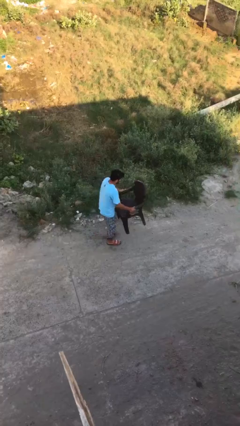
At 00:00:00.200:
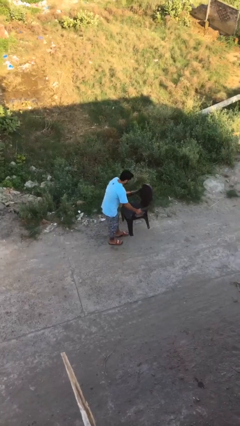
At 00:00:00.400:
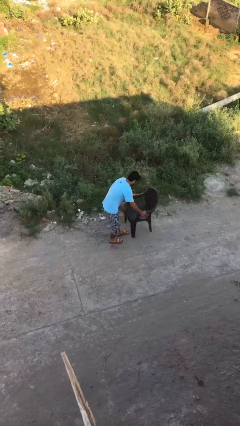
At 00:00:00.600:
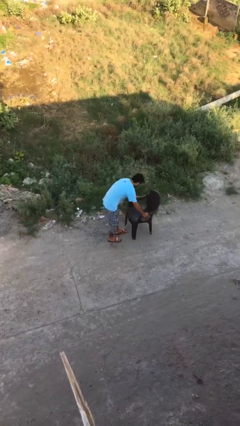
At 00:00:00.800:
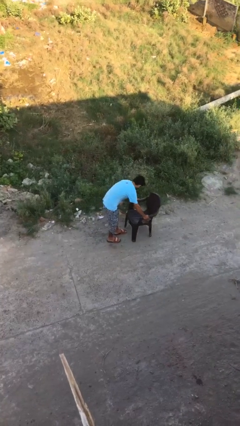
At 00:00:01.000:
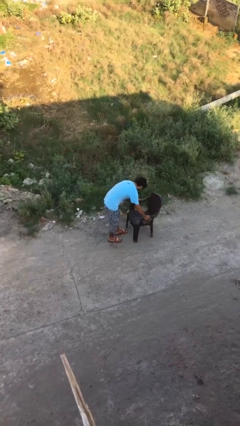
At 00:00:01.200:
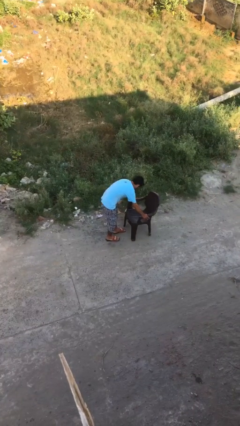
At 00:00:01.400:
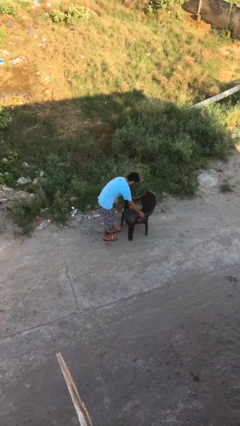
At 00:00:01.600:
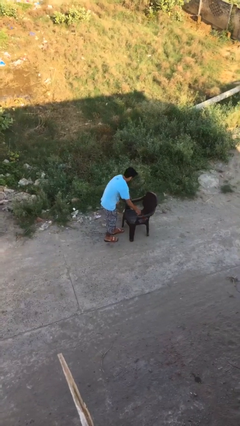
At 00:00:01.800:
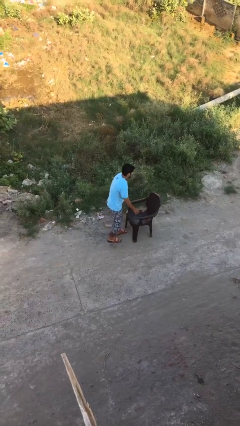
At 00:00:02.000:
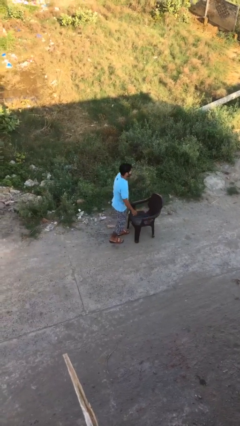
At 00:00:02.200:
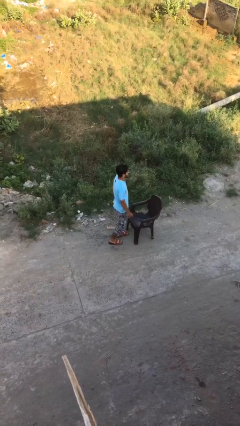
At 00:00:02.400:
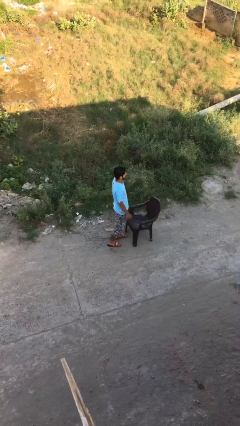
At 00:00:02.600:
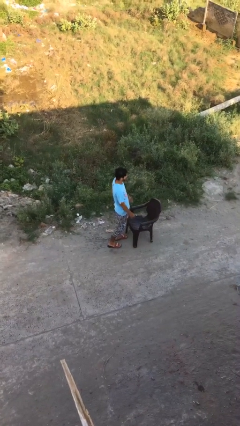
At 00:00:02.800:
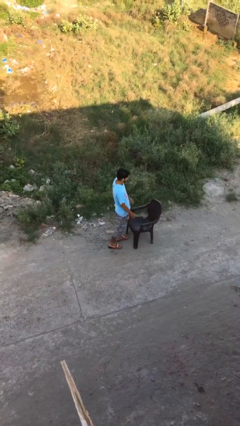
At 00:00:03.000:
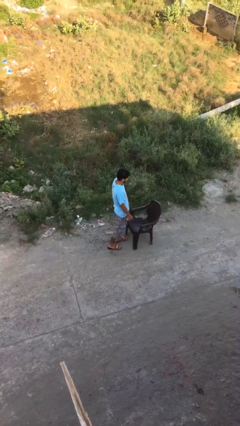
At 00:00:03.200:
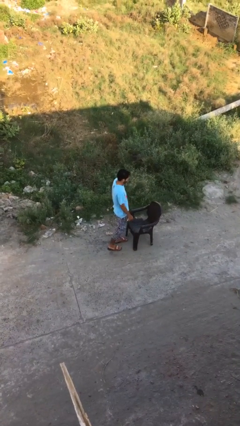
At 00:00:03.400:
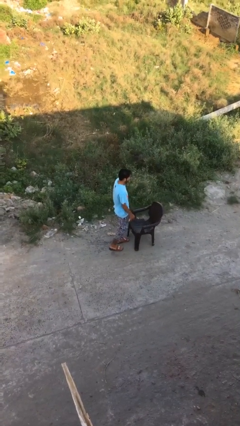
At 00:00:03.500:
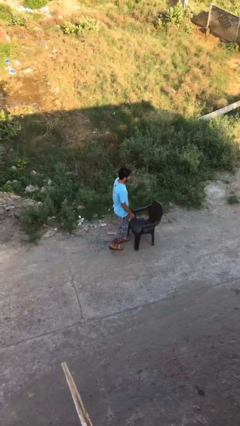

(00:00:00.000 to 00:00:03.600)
person puts down object on floor

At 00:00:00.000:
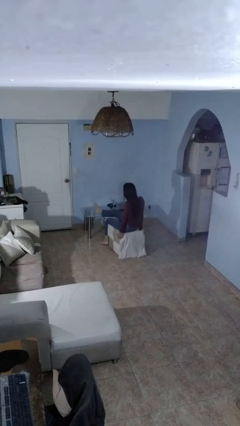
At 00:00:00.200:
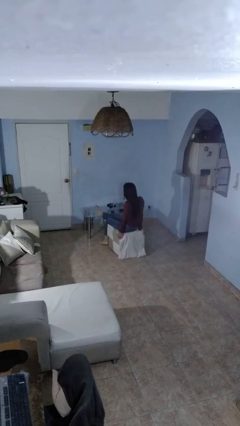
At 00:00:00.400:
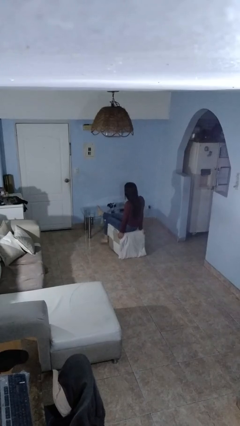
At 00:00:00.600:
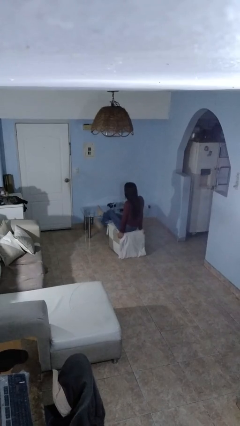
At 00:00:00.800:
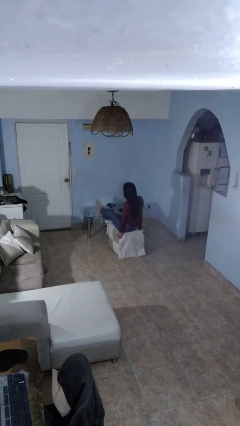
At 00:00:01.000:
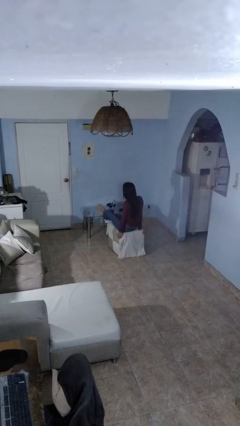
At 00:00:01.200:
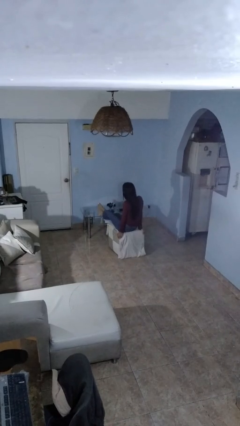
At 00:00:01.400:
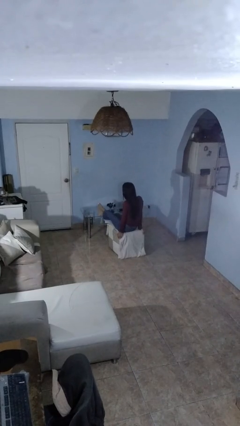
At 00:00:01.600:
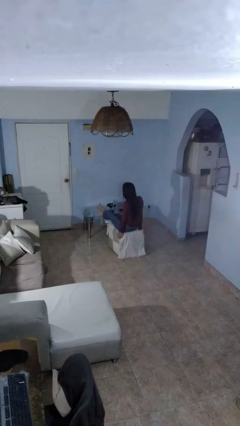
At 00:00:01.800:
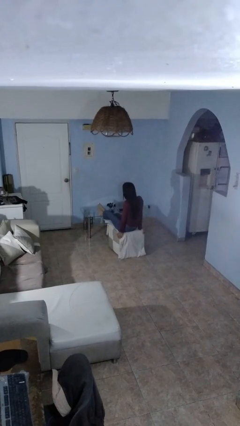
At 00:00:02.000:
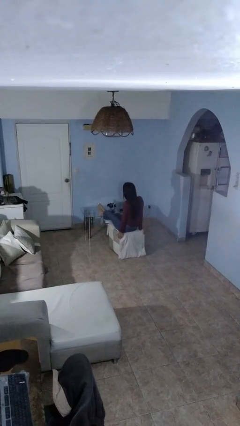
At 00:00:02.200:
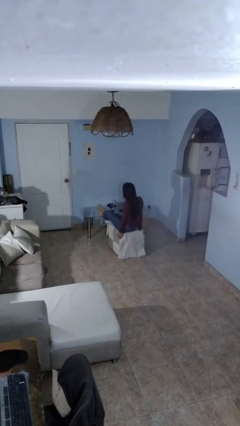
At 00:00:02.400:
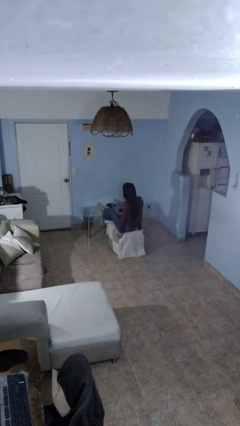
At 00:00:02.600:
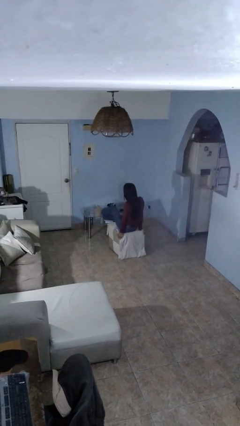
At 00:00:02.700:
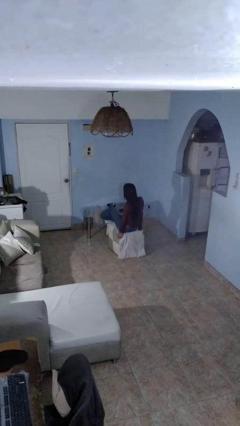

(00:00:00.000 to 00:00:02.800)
person puts feet up

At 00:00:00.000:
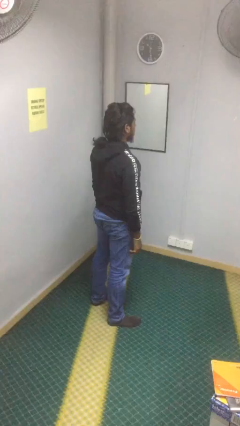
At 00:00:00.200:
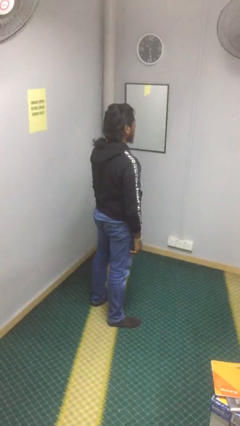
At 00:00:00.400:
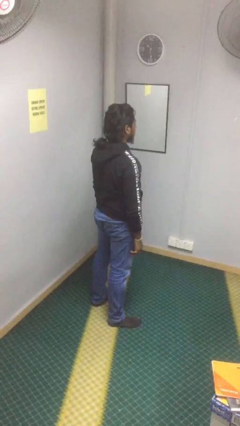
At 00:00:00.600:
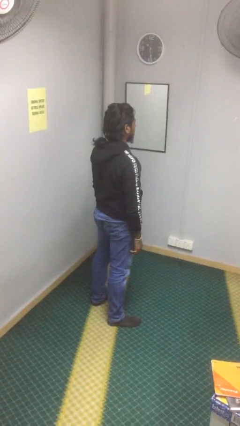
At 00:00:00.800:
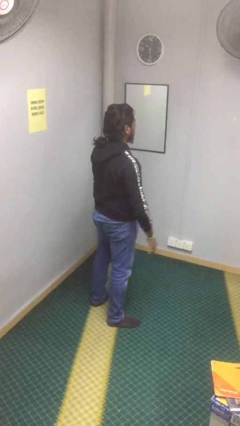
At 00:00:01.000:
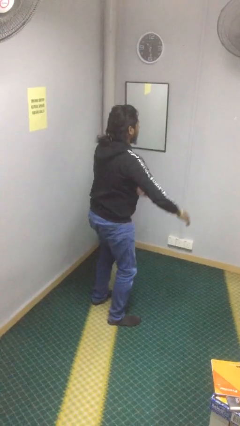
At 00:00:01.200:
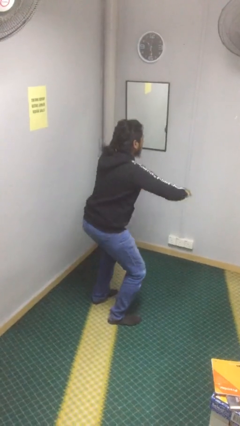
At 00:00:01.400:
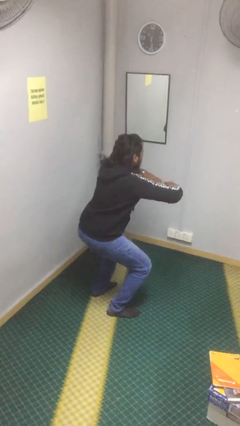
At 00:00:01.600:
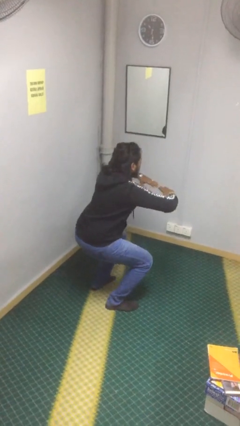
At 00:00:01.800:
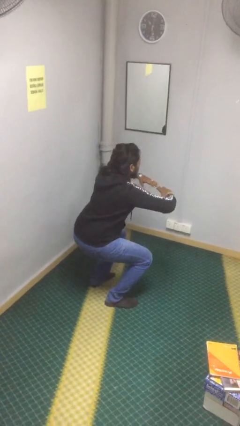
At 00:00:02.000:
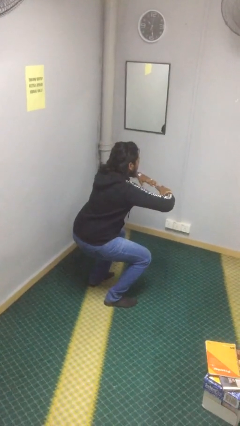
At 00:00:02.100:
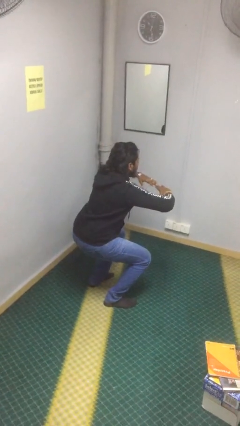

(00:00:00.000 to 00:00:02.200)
person squats

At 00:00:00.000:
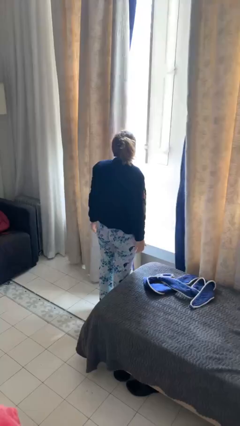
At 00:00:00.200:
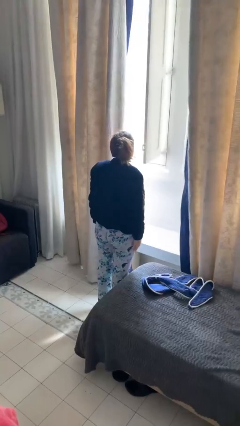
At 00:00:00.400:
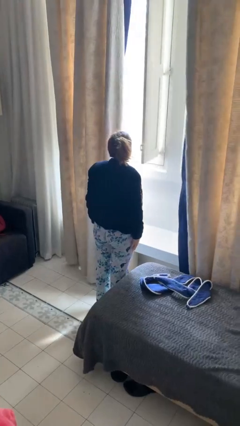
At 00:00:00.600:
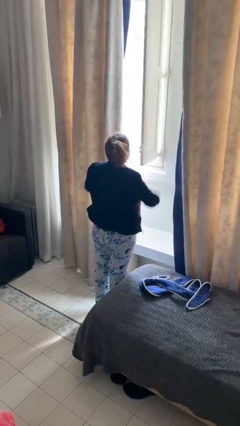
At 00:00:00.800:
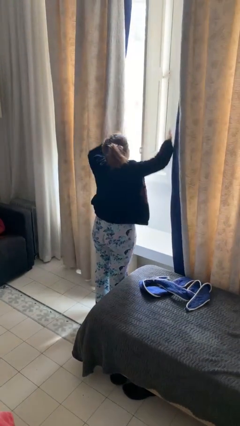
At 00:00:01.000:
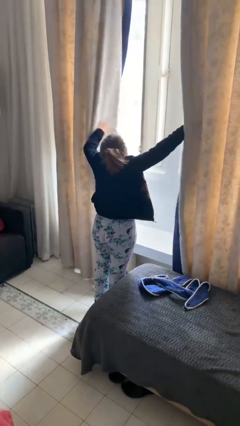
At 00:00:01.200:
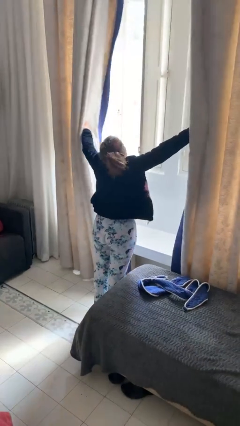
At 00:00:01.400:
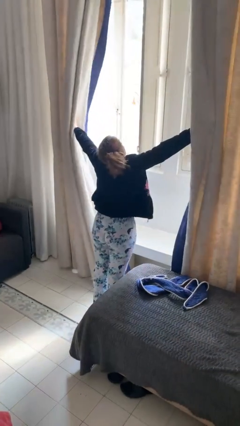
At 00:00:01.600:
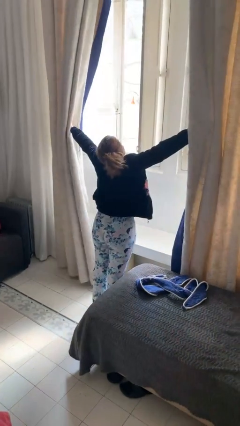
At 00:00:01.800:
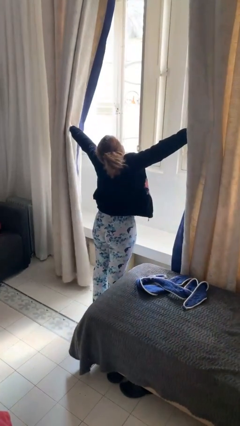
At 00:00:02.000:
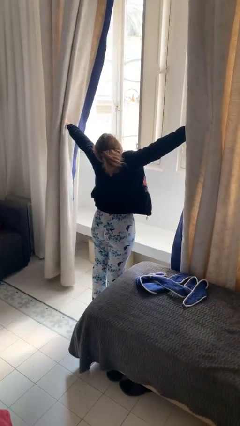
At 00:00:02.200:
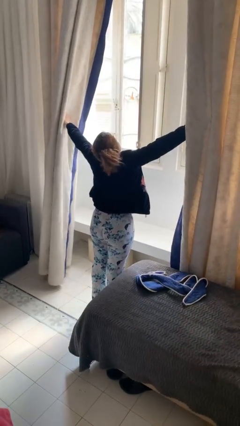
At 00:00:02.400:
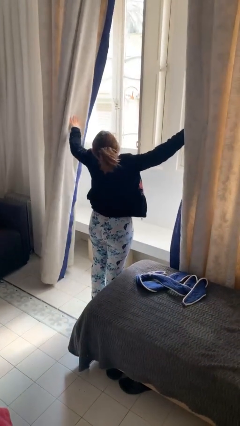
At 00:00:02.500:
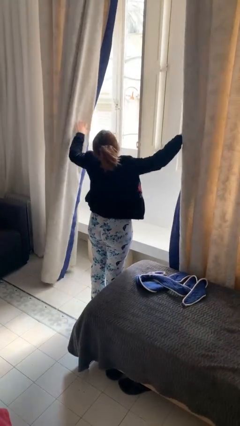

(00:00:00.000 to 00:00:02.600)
person opens curtains

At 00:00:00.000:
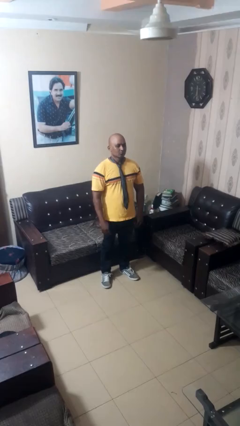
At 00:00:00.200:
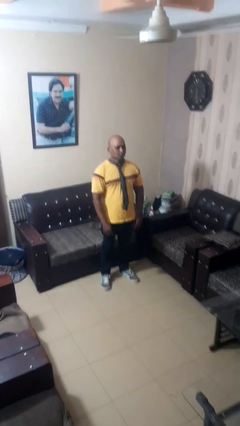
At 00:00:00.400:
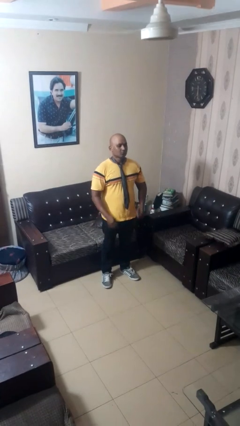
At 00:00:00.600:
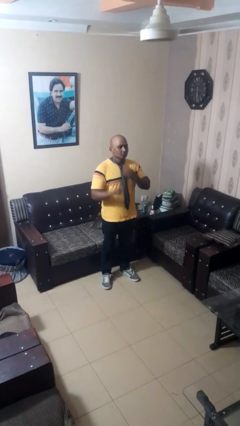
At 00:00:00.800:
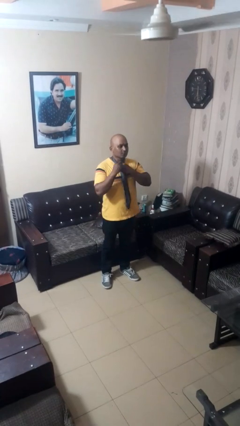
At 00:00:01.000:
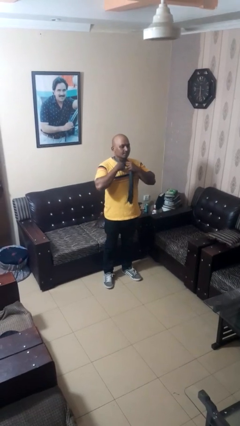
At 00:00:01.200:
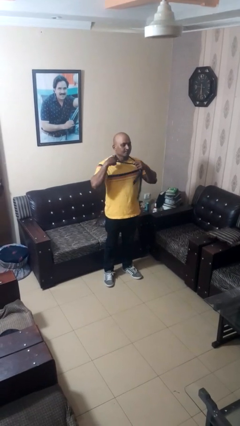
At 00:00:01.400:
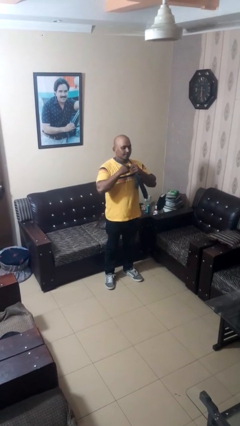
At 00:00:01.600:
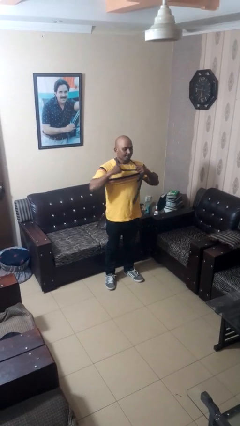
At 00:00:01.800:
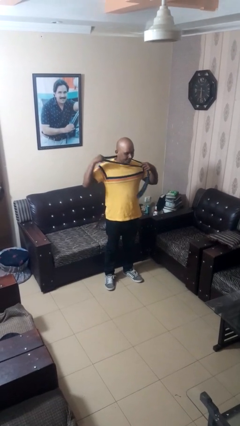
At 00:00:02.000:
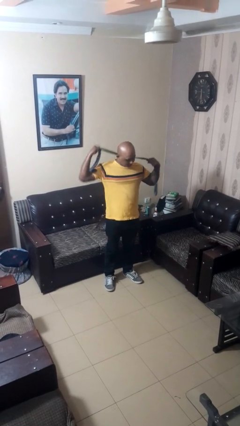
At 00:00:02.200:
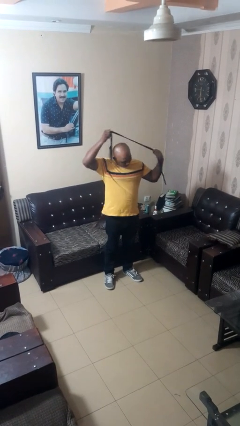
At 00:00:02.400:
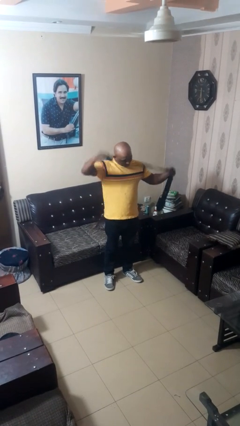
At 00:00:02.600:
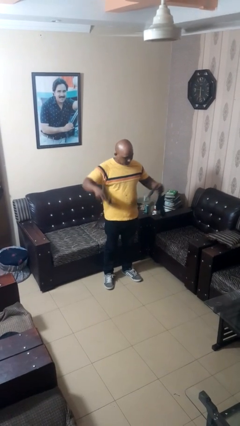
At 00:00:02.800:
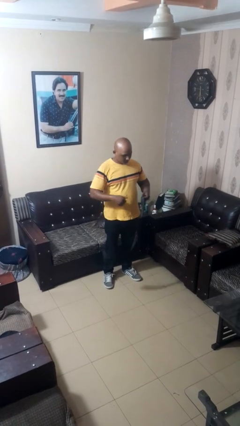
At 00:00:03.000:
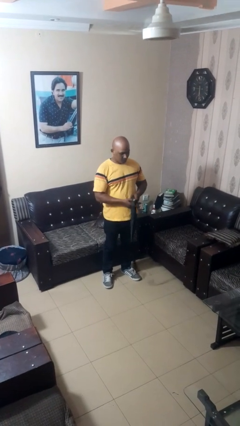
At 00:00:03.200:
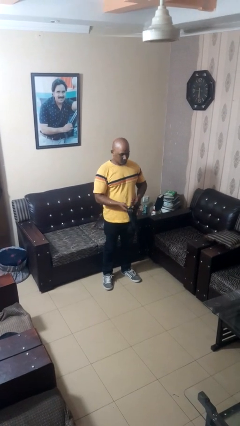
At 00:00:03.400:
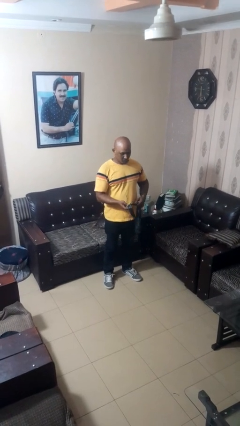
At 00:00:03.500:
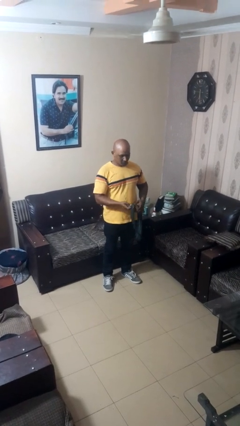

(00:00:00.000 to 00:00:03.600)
person takes off necktie

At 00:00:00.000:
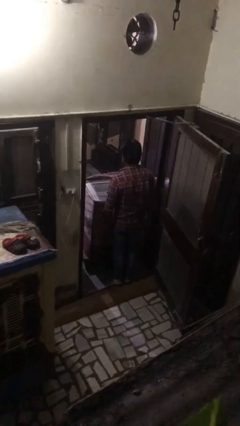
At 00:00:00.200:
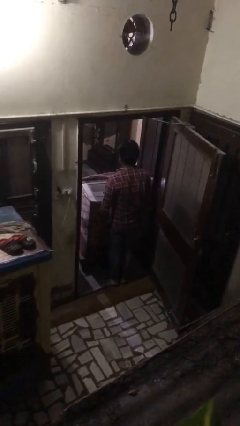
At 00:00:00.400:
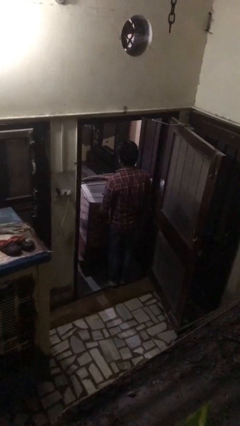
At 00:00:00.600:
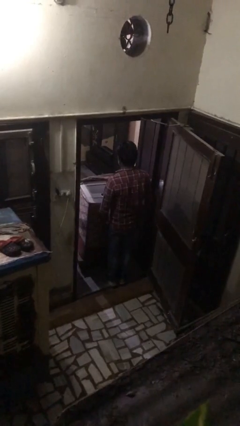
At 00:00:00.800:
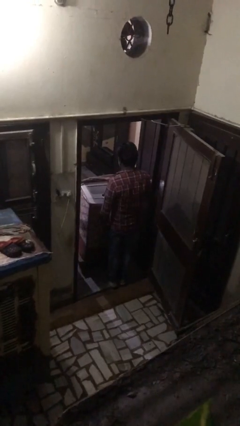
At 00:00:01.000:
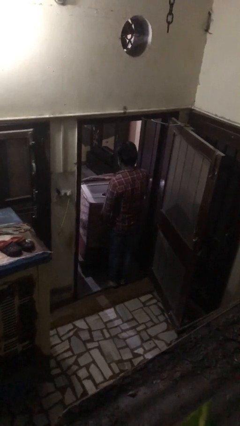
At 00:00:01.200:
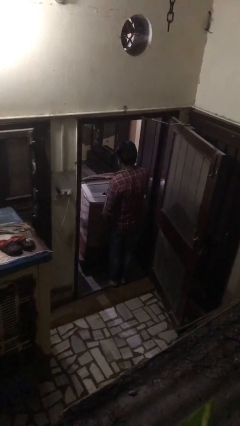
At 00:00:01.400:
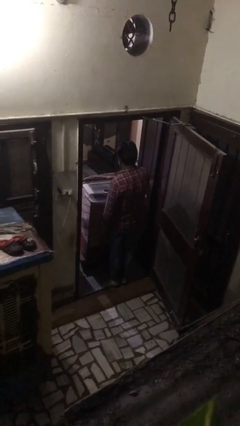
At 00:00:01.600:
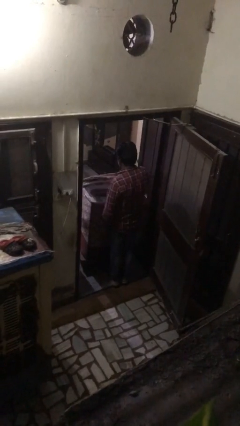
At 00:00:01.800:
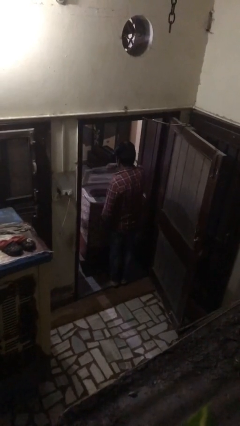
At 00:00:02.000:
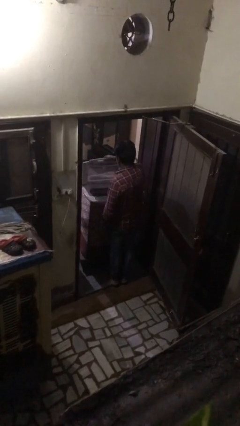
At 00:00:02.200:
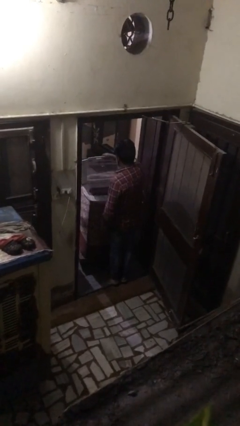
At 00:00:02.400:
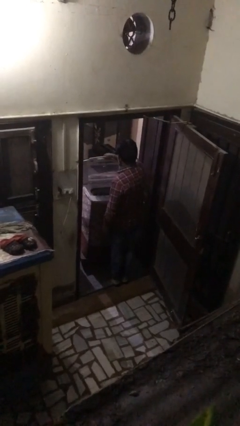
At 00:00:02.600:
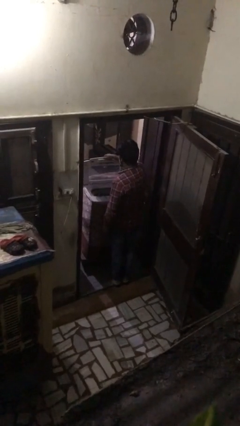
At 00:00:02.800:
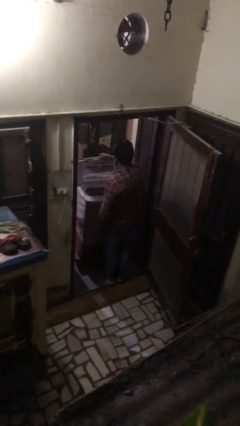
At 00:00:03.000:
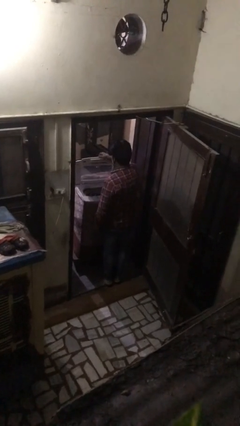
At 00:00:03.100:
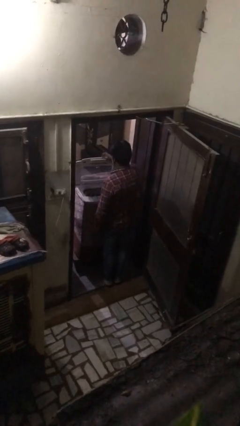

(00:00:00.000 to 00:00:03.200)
person opens clothes washer
